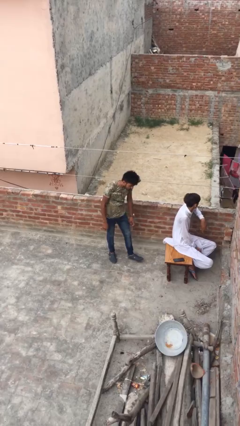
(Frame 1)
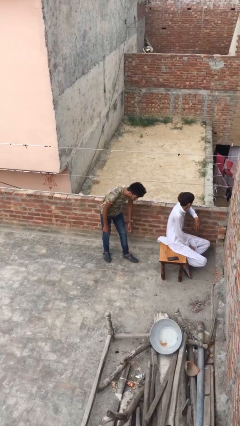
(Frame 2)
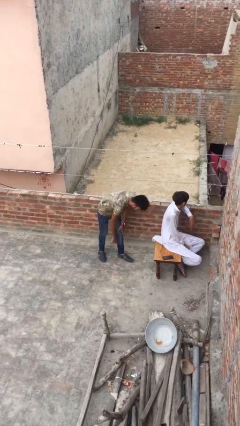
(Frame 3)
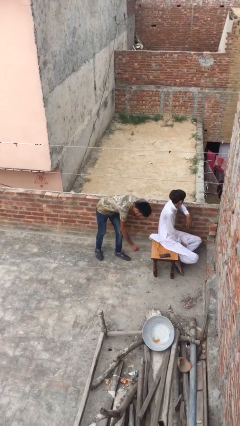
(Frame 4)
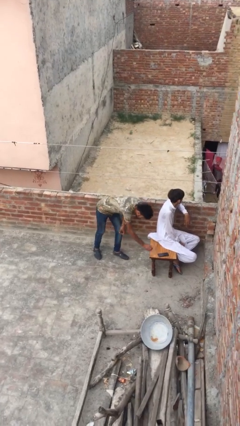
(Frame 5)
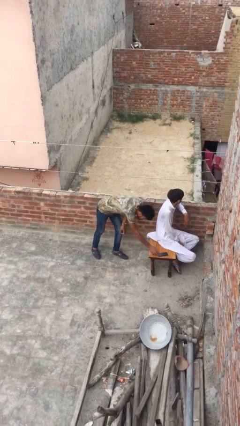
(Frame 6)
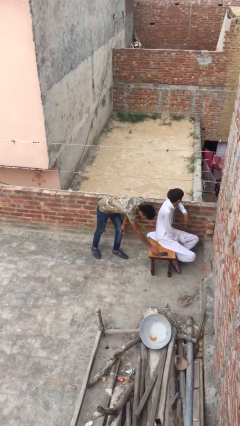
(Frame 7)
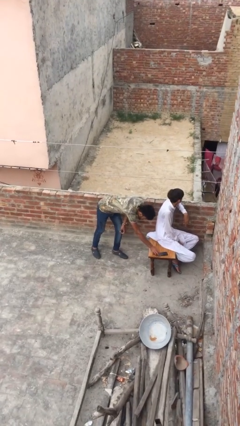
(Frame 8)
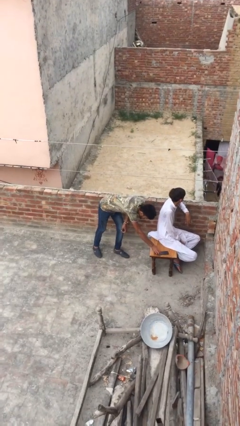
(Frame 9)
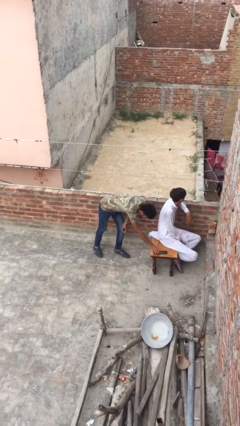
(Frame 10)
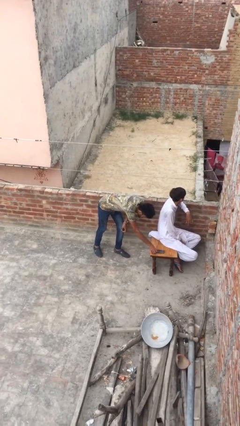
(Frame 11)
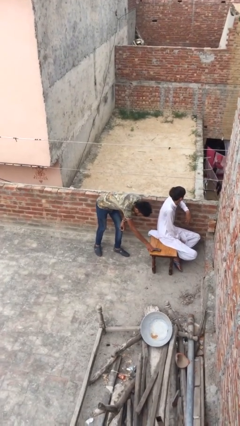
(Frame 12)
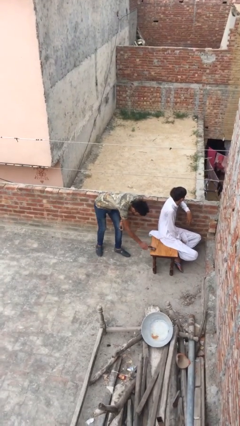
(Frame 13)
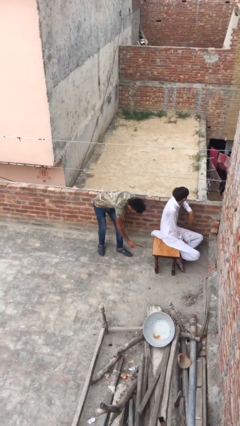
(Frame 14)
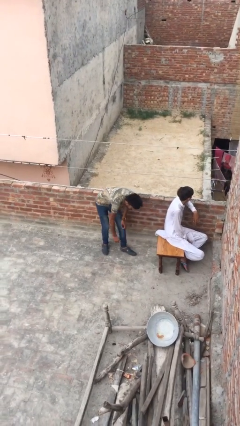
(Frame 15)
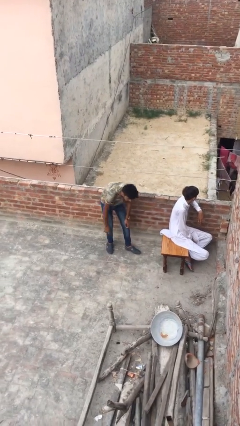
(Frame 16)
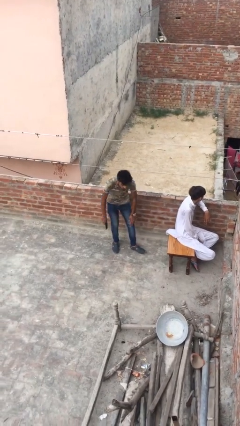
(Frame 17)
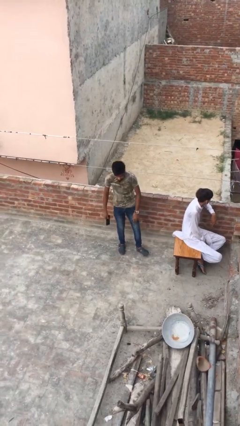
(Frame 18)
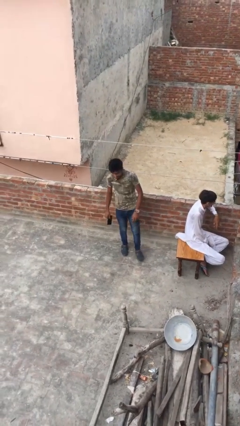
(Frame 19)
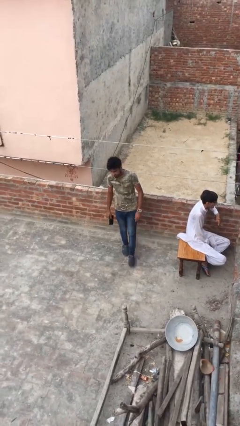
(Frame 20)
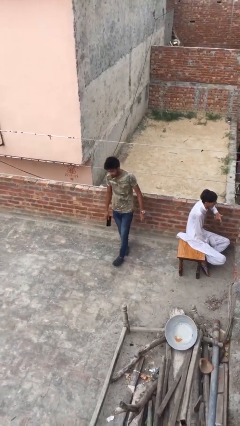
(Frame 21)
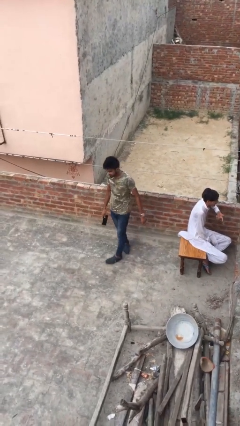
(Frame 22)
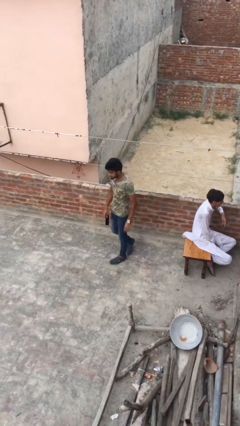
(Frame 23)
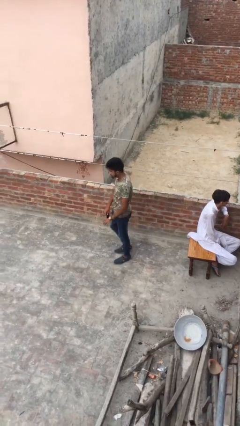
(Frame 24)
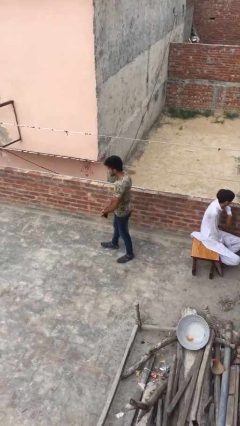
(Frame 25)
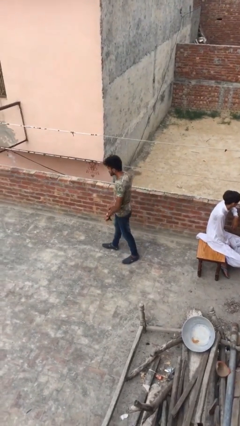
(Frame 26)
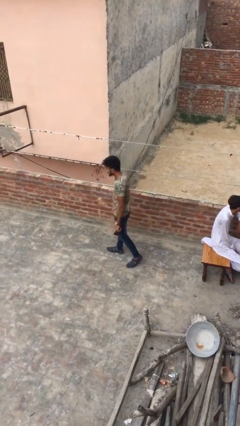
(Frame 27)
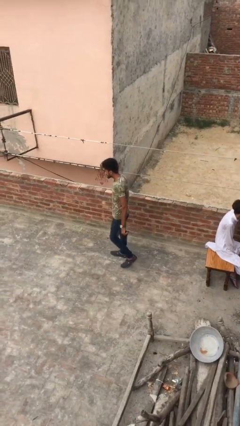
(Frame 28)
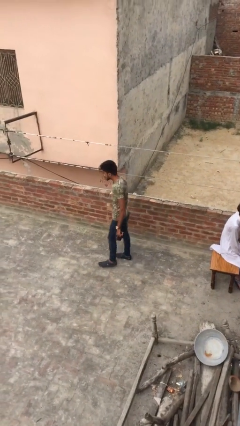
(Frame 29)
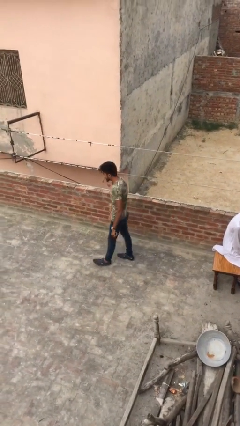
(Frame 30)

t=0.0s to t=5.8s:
person steals object from person

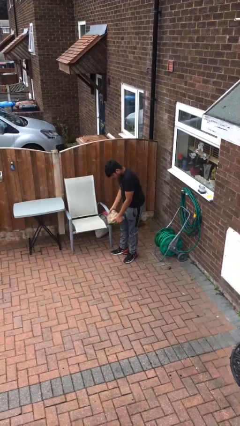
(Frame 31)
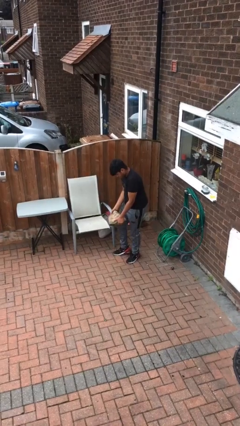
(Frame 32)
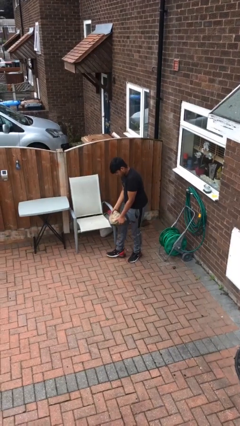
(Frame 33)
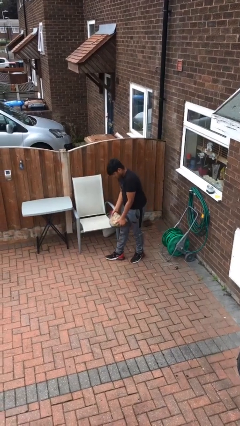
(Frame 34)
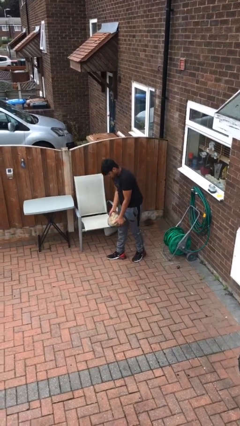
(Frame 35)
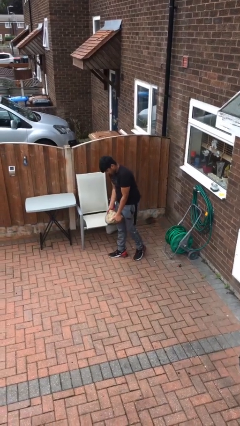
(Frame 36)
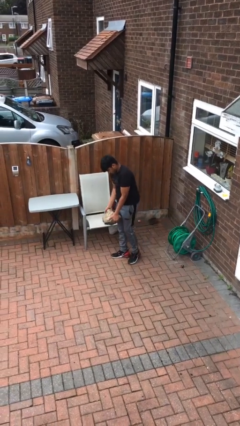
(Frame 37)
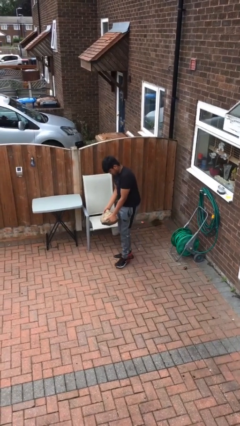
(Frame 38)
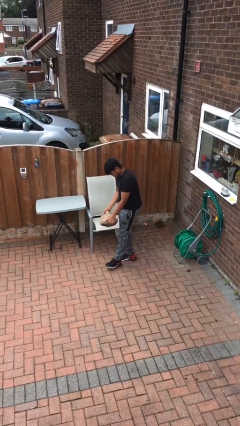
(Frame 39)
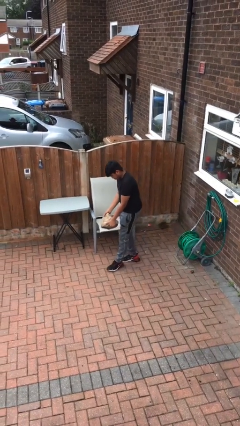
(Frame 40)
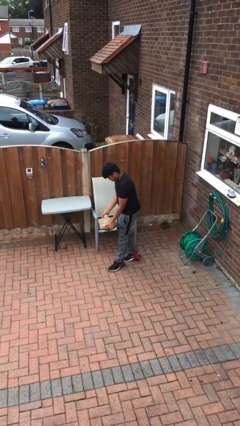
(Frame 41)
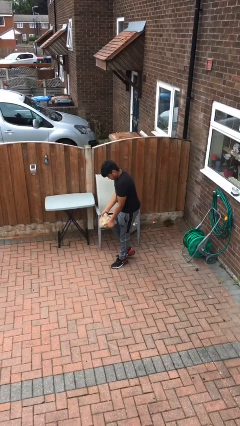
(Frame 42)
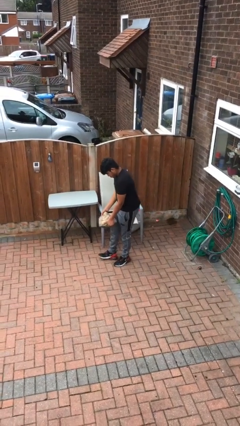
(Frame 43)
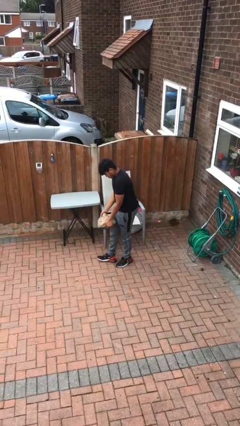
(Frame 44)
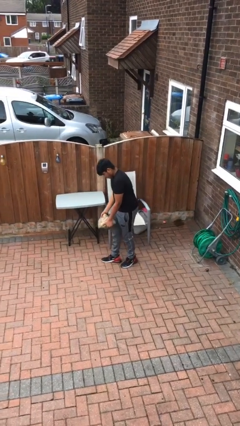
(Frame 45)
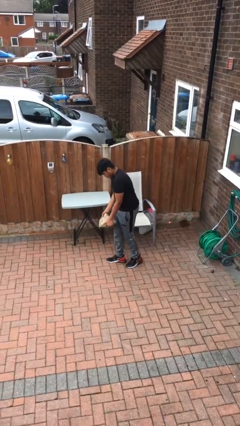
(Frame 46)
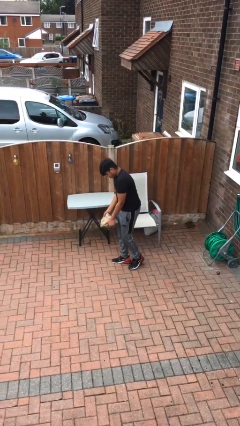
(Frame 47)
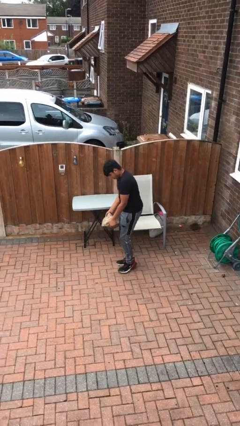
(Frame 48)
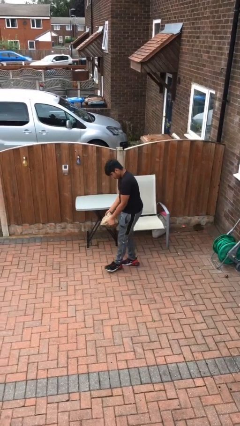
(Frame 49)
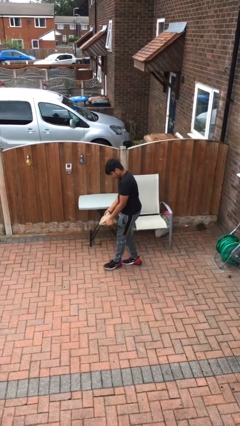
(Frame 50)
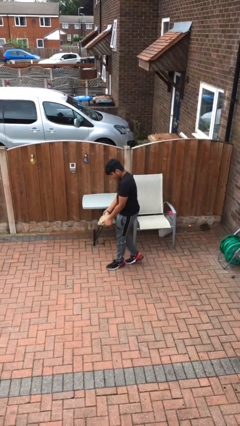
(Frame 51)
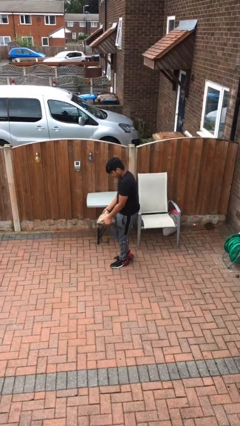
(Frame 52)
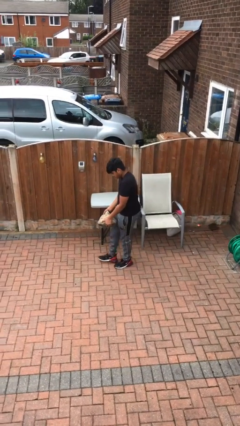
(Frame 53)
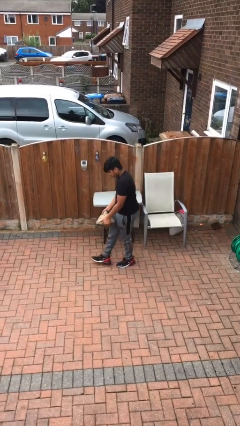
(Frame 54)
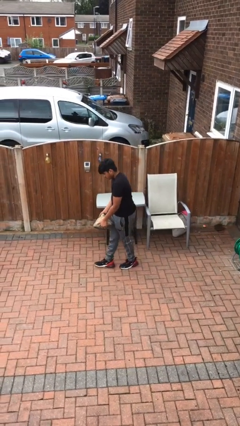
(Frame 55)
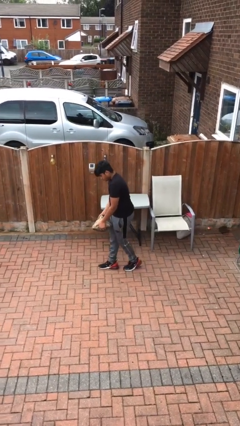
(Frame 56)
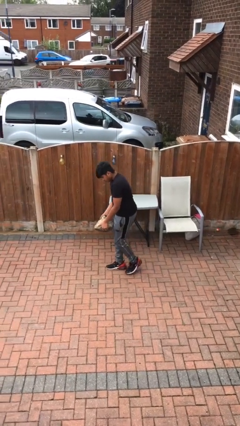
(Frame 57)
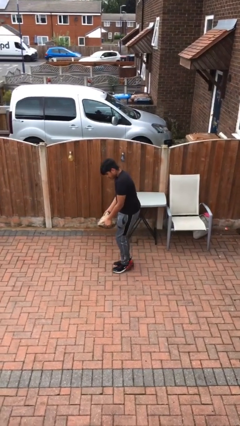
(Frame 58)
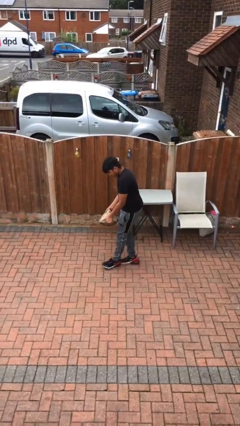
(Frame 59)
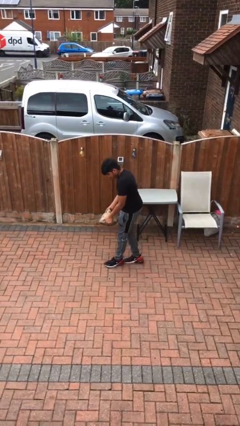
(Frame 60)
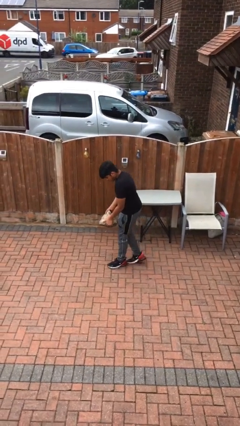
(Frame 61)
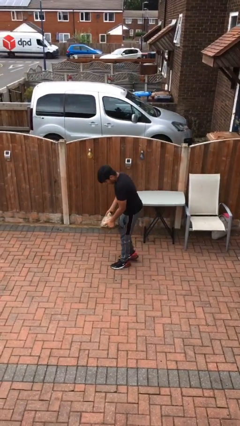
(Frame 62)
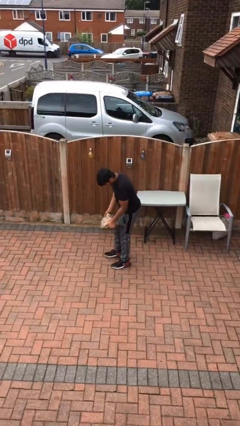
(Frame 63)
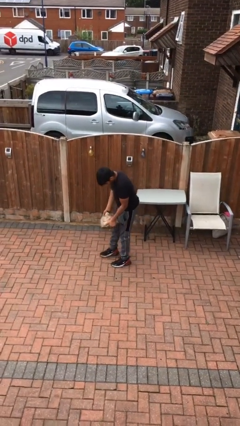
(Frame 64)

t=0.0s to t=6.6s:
person carries heavy object

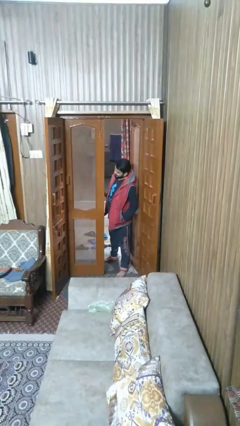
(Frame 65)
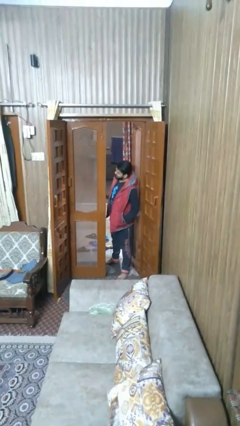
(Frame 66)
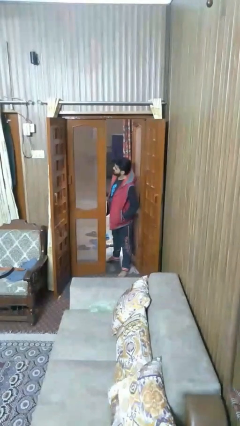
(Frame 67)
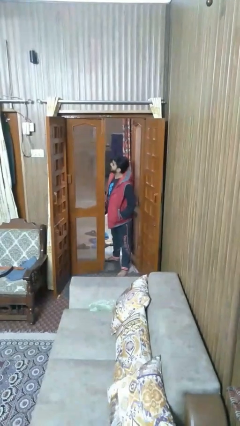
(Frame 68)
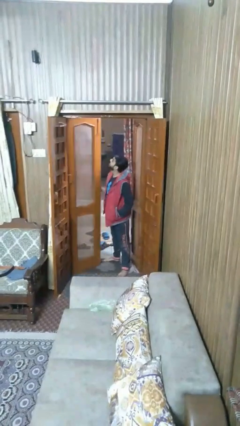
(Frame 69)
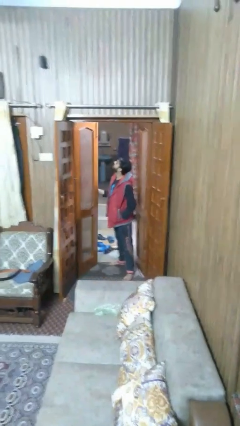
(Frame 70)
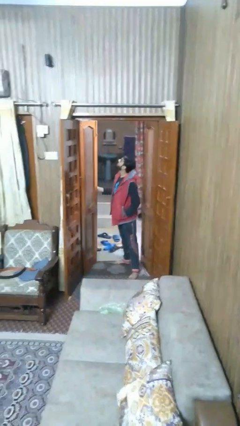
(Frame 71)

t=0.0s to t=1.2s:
person closes facility door

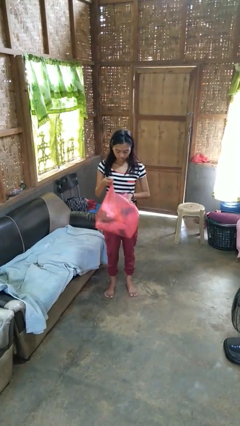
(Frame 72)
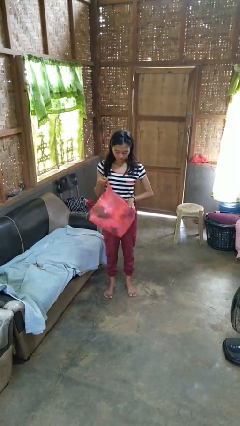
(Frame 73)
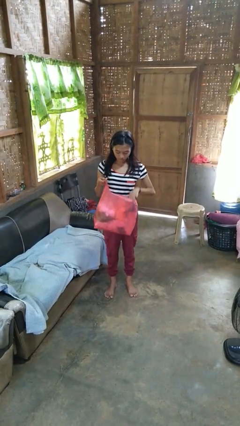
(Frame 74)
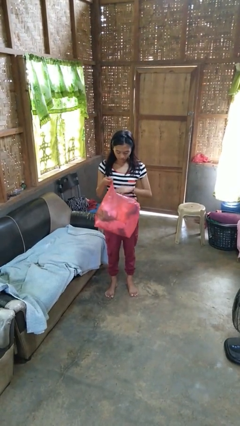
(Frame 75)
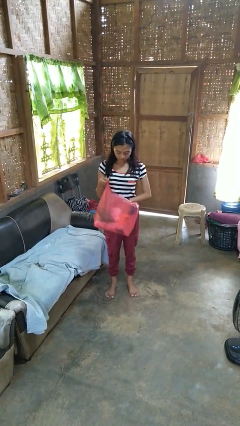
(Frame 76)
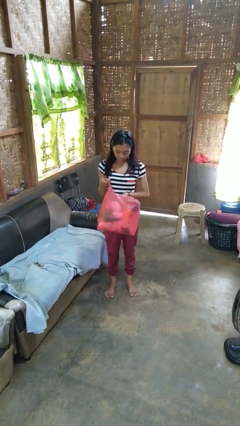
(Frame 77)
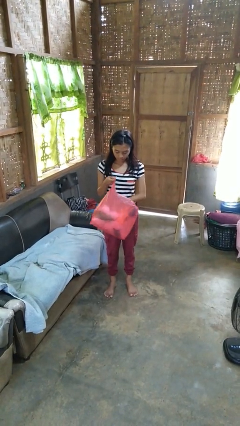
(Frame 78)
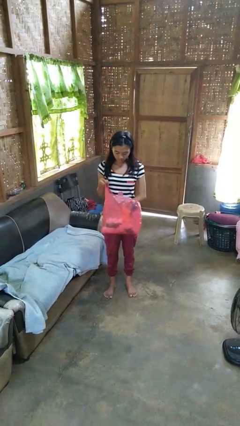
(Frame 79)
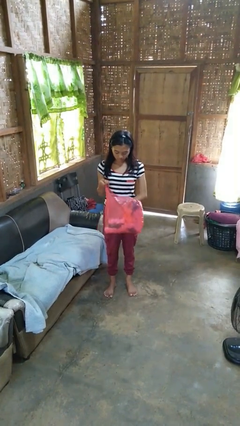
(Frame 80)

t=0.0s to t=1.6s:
person searches in bag

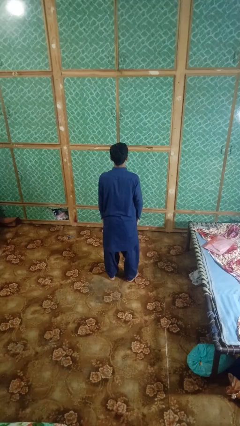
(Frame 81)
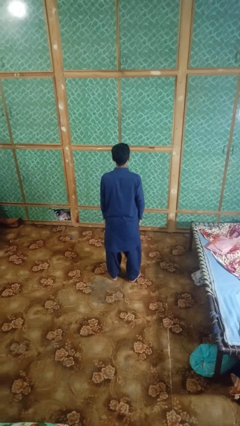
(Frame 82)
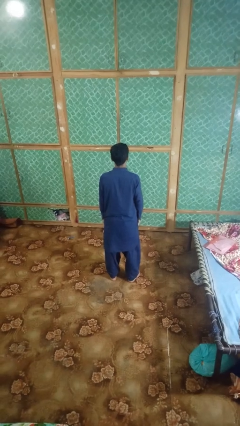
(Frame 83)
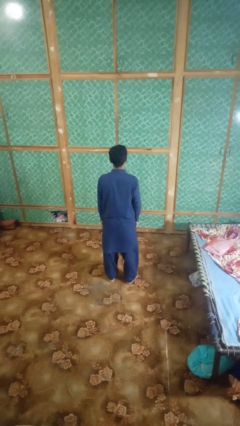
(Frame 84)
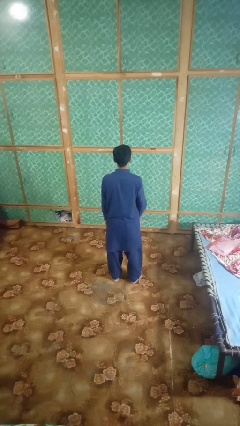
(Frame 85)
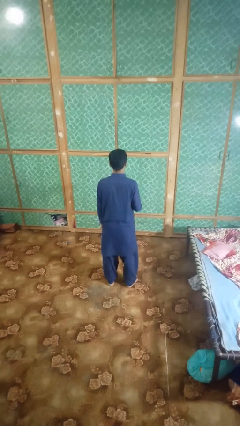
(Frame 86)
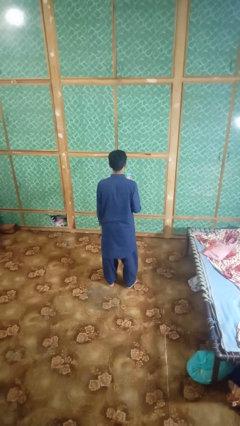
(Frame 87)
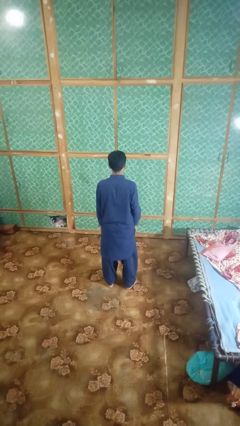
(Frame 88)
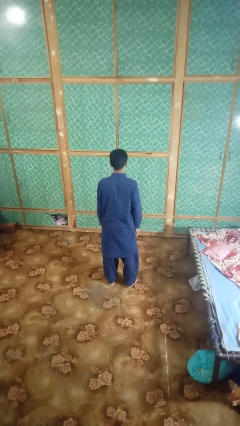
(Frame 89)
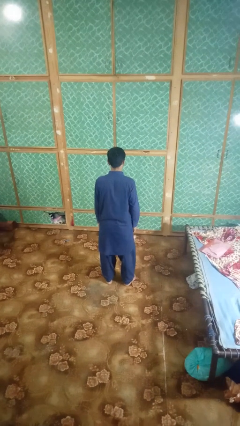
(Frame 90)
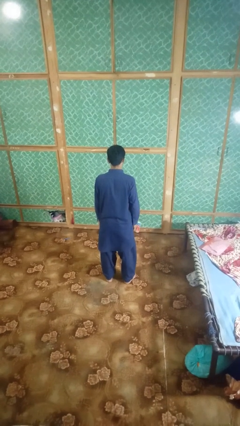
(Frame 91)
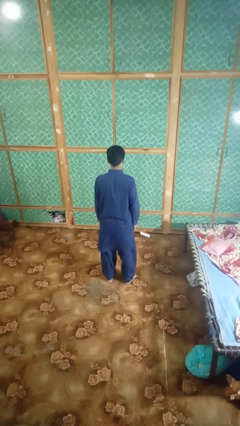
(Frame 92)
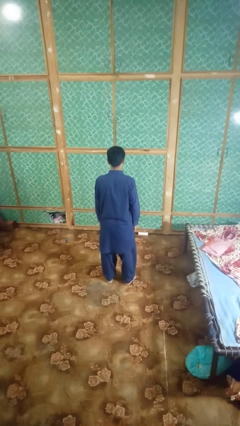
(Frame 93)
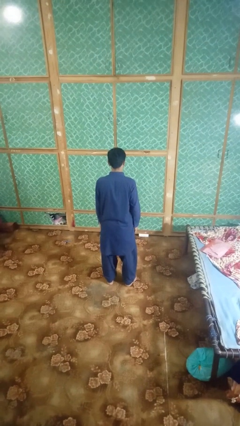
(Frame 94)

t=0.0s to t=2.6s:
person throws object into air
